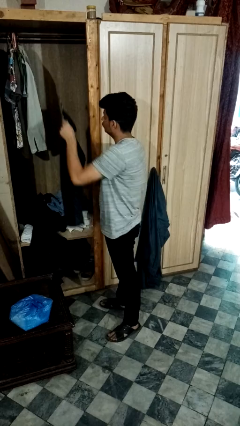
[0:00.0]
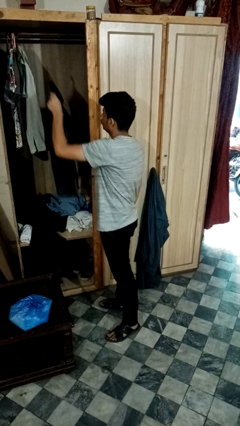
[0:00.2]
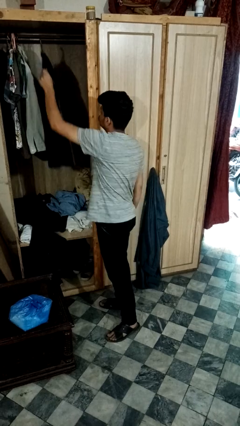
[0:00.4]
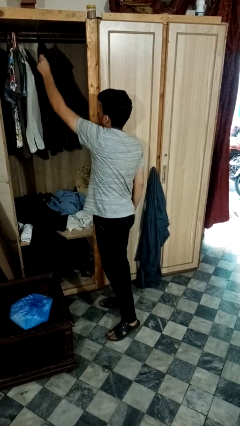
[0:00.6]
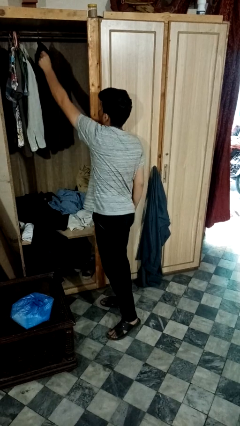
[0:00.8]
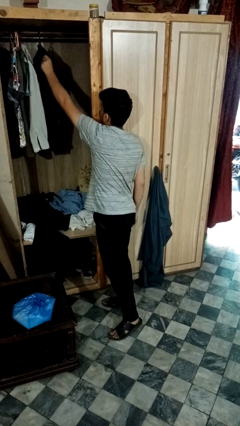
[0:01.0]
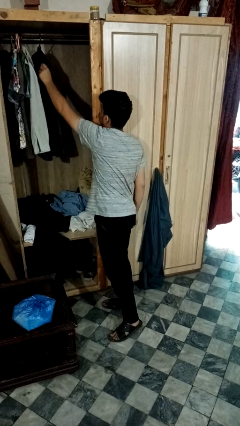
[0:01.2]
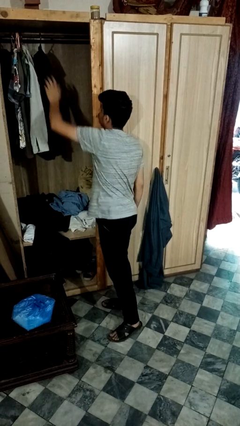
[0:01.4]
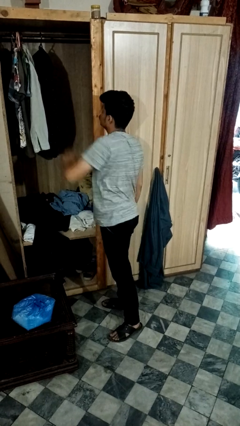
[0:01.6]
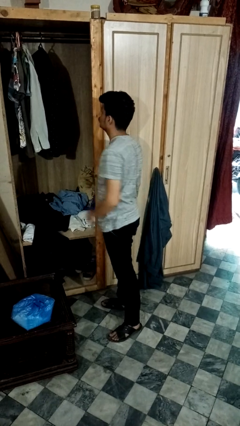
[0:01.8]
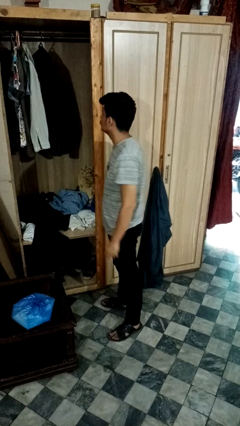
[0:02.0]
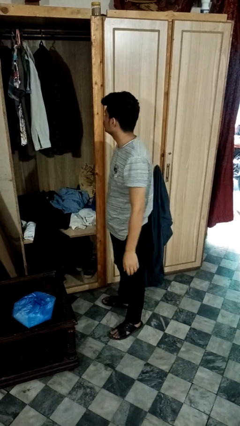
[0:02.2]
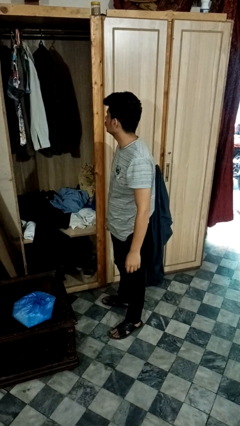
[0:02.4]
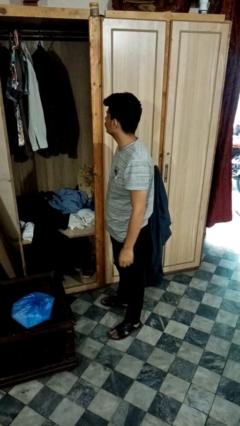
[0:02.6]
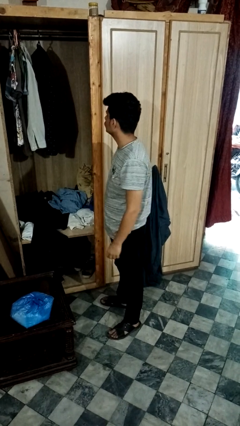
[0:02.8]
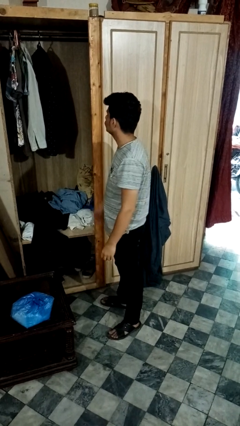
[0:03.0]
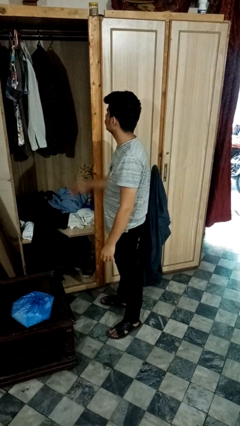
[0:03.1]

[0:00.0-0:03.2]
person puts clothes into closet

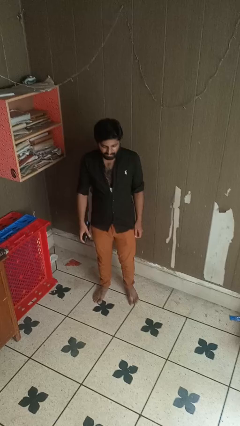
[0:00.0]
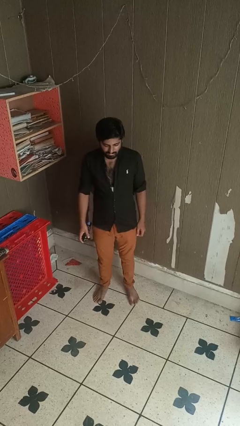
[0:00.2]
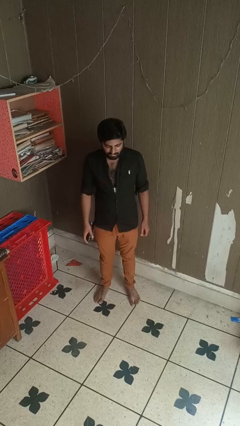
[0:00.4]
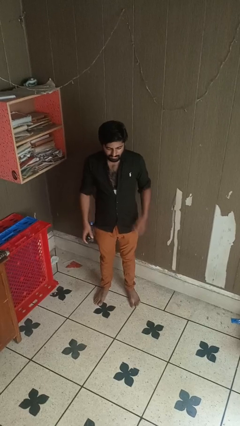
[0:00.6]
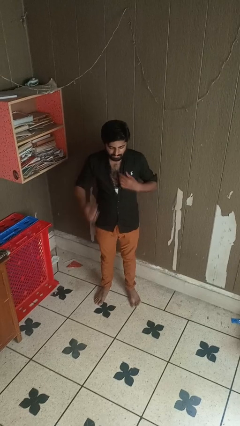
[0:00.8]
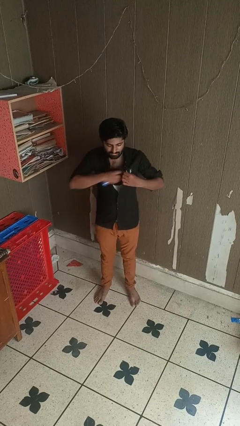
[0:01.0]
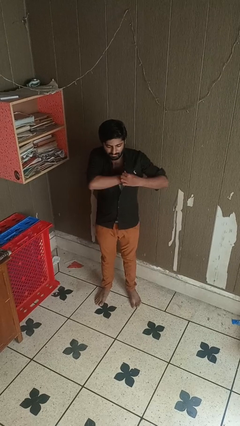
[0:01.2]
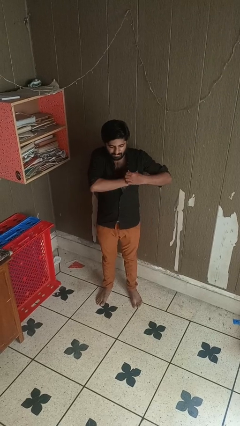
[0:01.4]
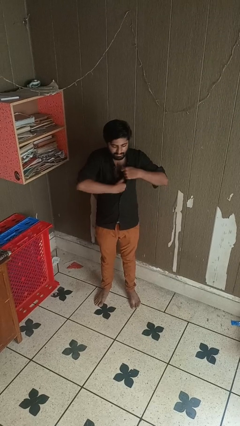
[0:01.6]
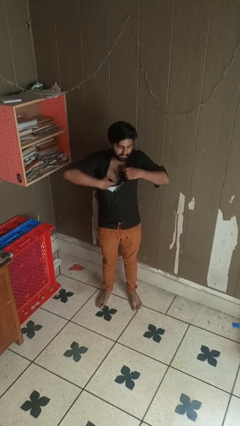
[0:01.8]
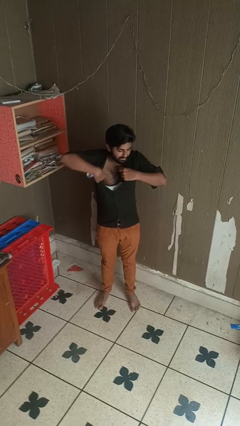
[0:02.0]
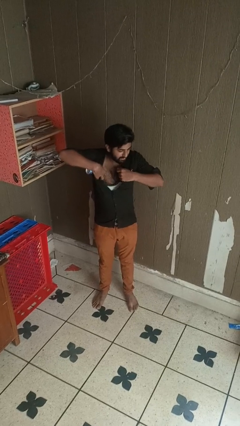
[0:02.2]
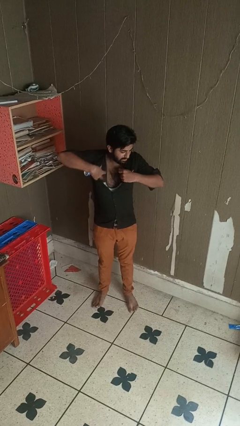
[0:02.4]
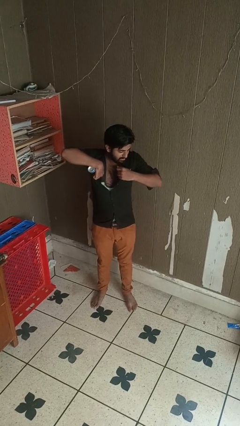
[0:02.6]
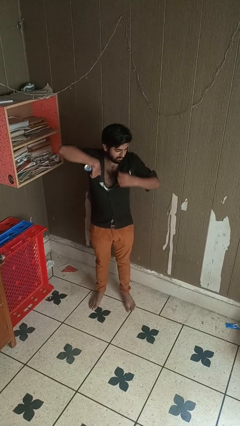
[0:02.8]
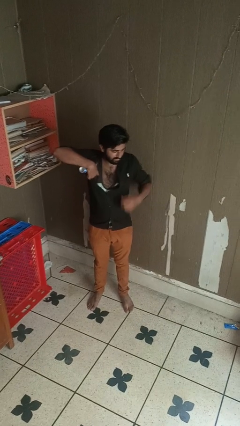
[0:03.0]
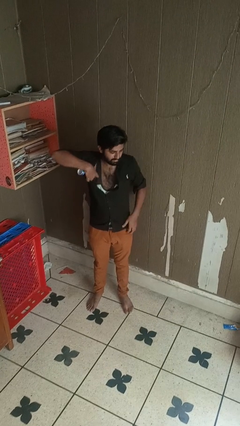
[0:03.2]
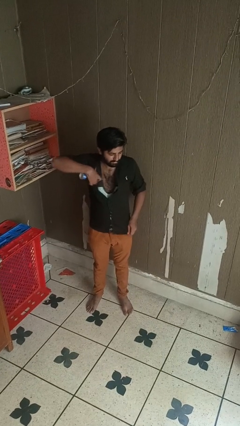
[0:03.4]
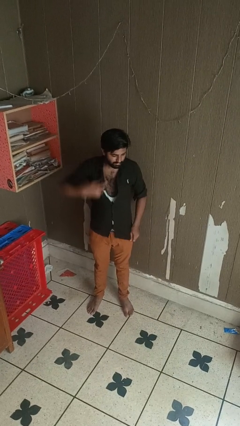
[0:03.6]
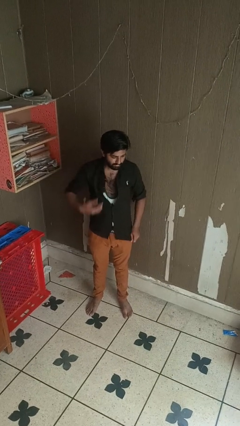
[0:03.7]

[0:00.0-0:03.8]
person applies deodorant

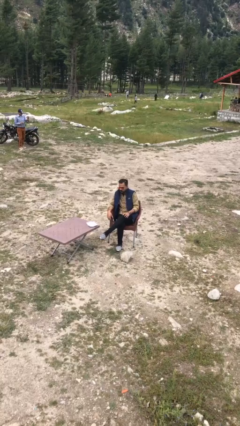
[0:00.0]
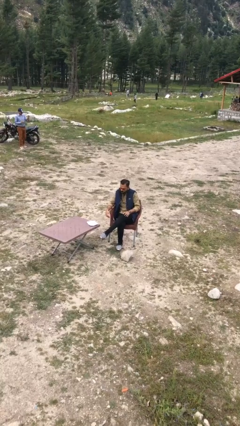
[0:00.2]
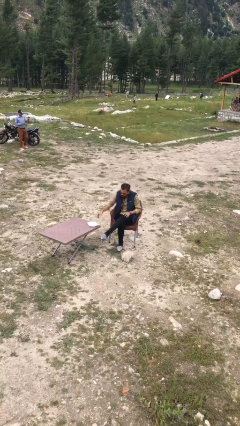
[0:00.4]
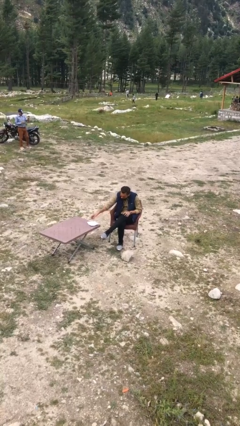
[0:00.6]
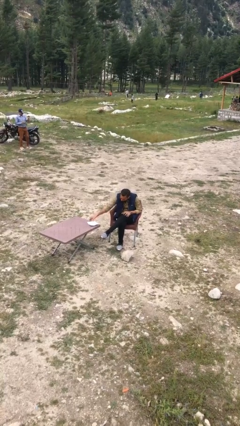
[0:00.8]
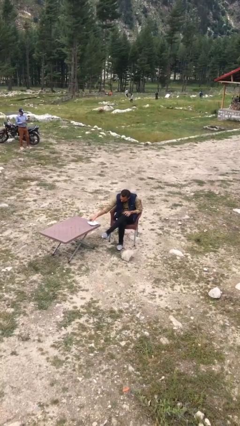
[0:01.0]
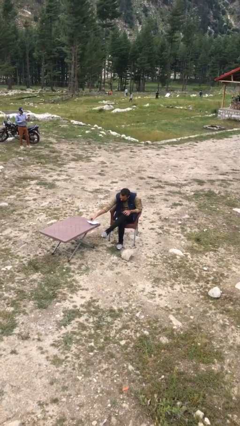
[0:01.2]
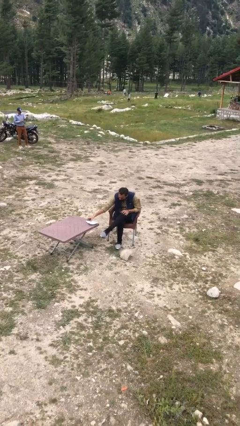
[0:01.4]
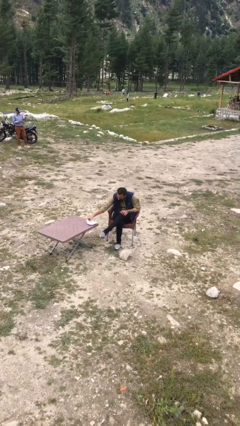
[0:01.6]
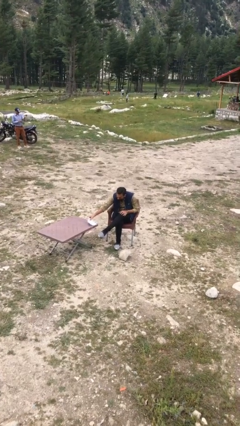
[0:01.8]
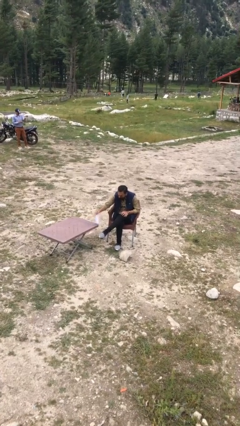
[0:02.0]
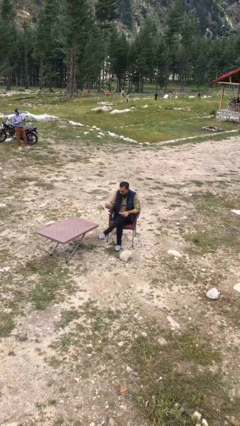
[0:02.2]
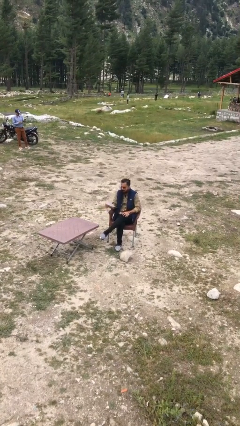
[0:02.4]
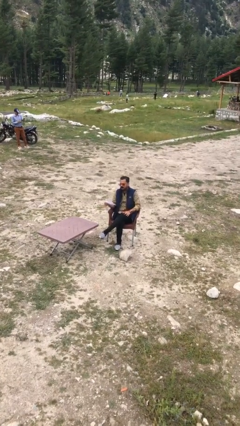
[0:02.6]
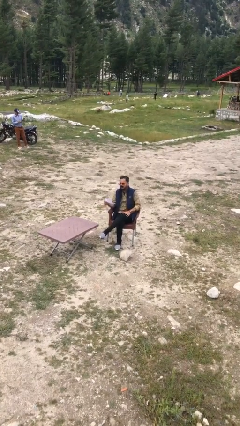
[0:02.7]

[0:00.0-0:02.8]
person picks up object from table

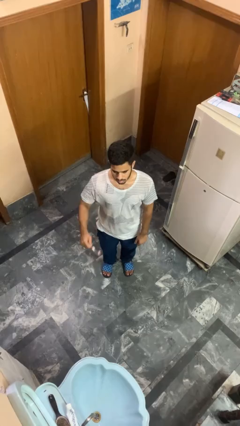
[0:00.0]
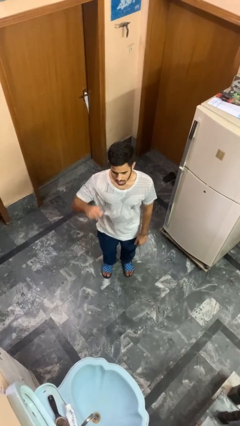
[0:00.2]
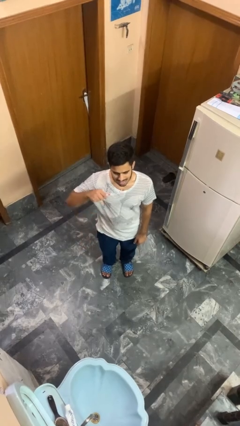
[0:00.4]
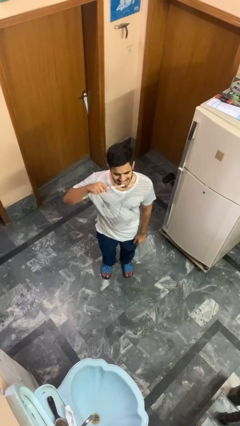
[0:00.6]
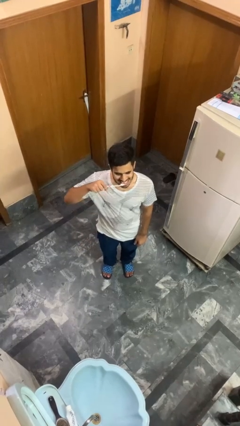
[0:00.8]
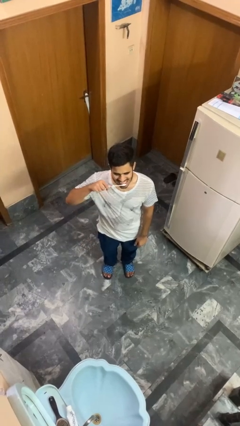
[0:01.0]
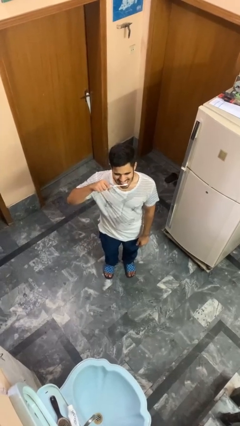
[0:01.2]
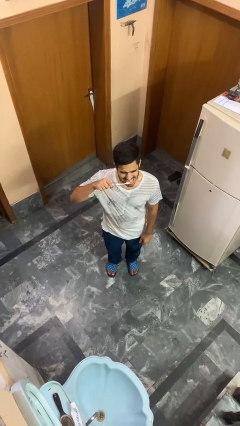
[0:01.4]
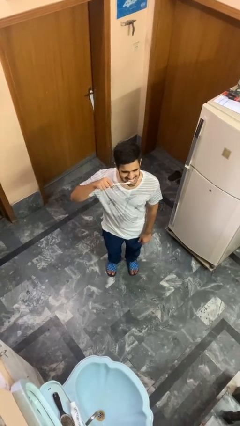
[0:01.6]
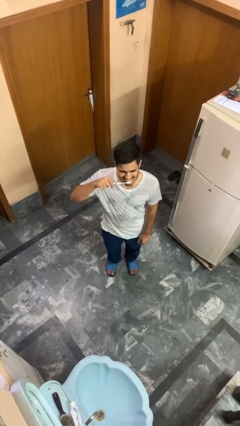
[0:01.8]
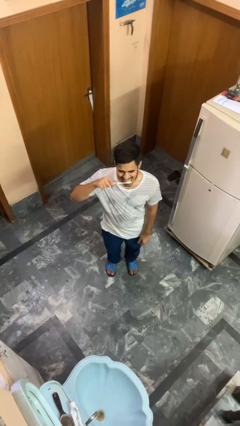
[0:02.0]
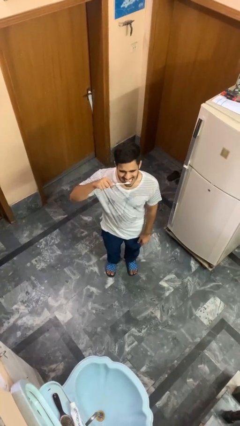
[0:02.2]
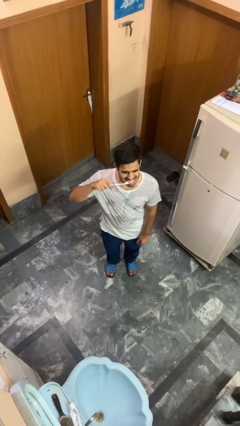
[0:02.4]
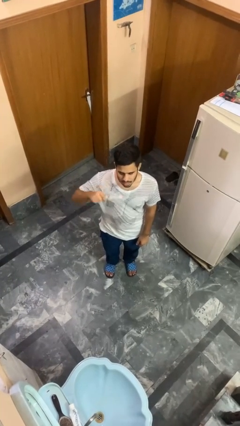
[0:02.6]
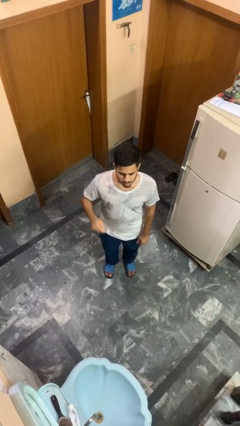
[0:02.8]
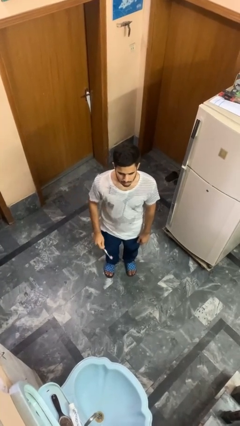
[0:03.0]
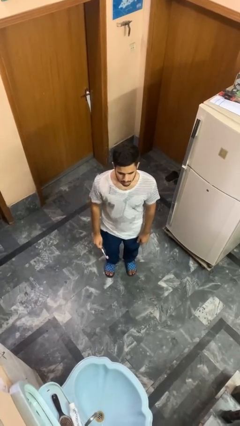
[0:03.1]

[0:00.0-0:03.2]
person brushes teeth

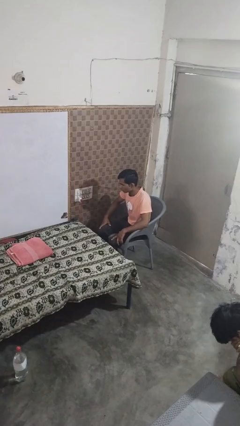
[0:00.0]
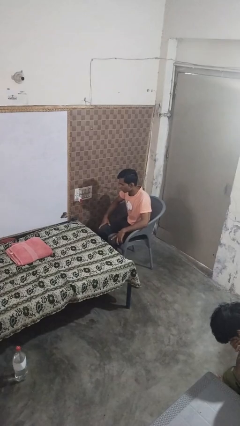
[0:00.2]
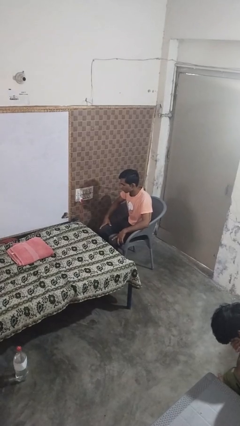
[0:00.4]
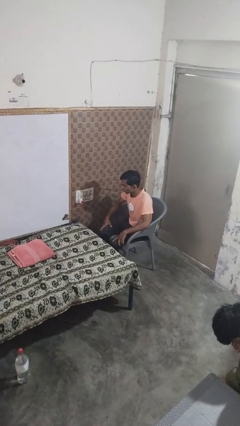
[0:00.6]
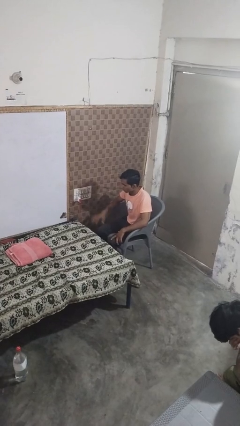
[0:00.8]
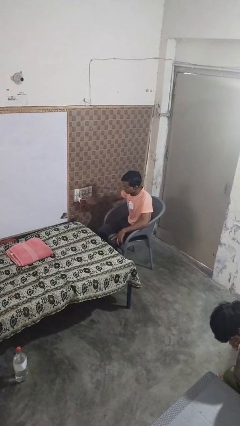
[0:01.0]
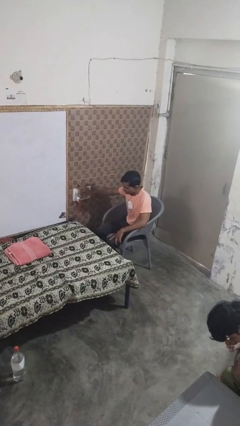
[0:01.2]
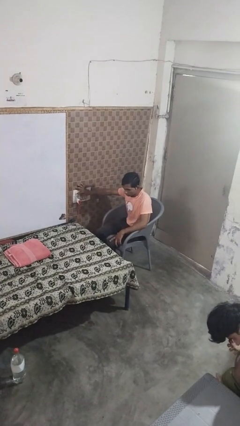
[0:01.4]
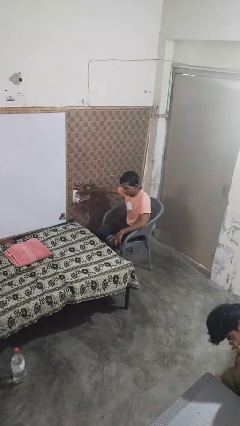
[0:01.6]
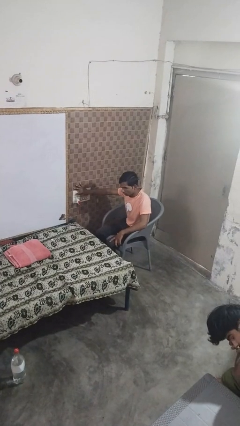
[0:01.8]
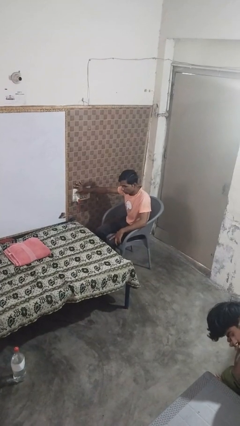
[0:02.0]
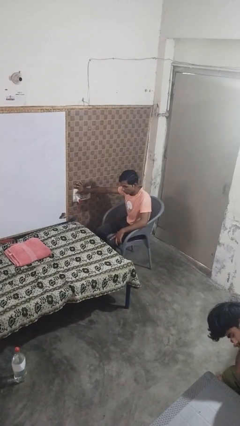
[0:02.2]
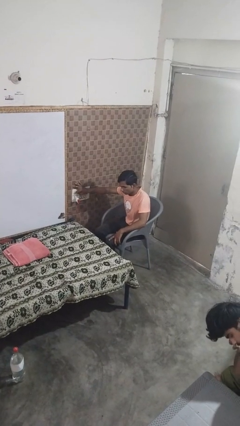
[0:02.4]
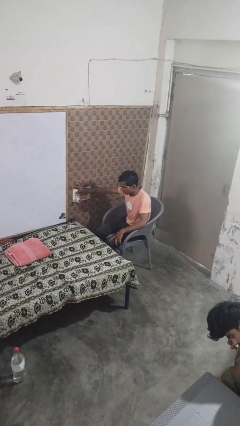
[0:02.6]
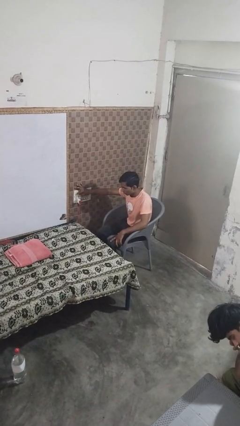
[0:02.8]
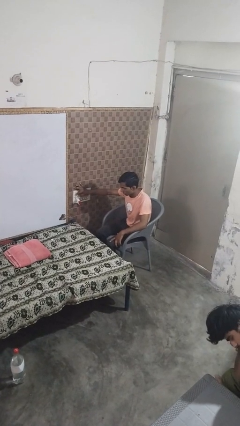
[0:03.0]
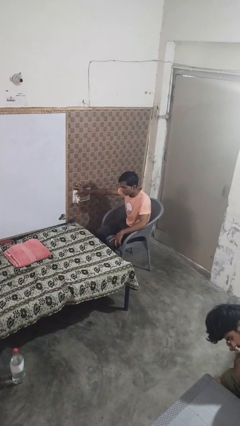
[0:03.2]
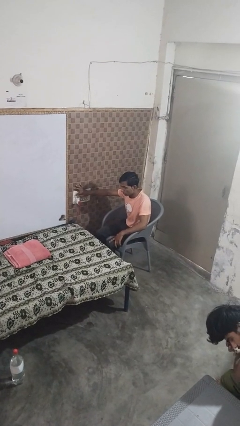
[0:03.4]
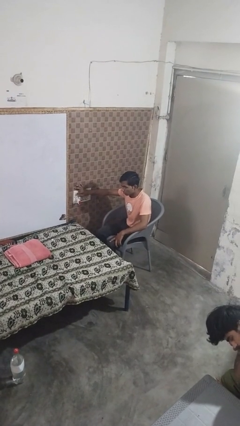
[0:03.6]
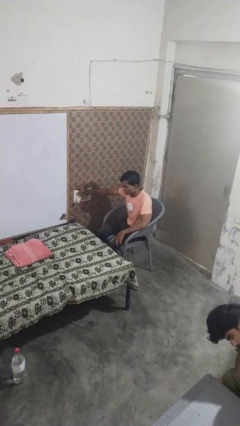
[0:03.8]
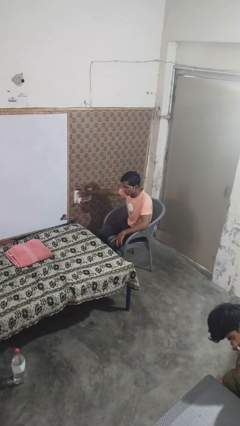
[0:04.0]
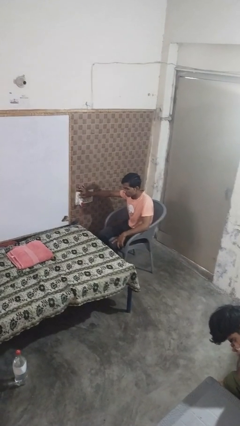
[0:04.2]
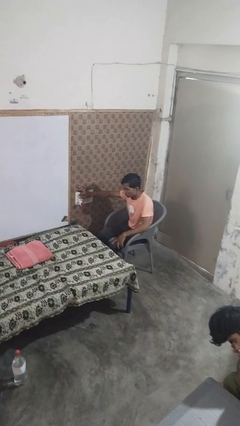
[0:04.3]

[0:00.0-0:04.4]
person adjusts thermostat

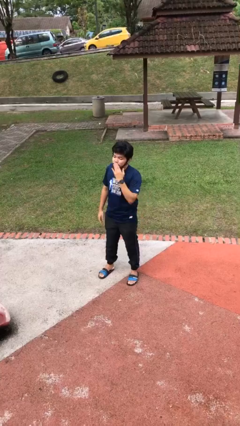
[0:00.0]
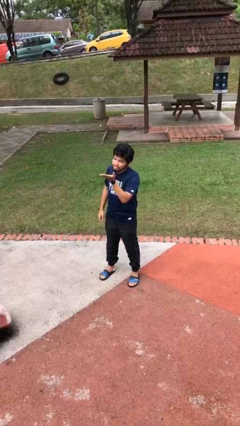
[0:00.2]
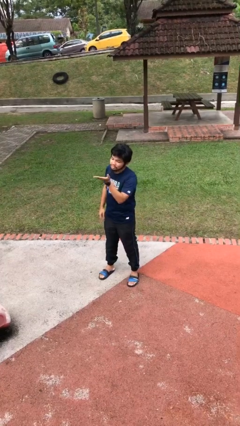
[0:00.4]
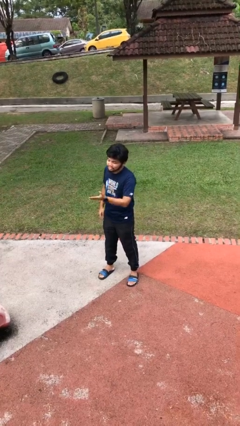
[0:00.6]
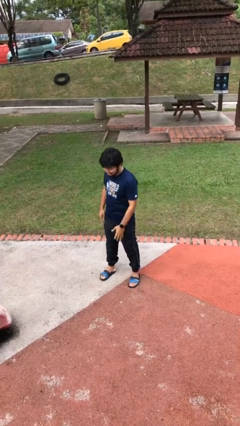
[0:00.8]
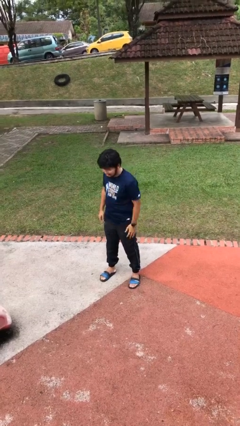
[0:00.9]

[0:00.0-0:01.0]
person gestures blow kiss
